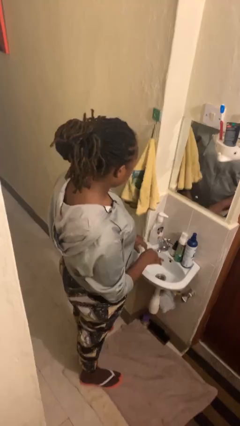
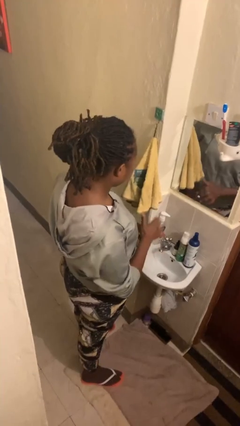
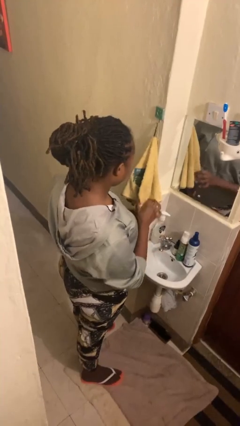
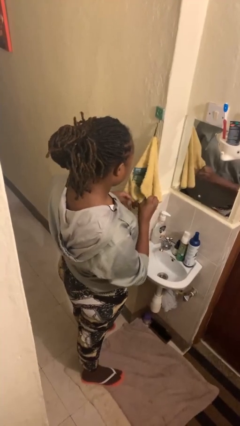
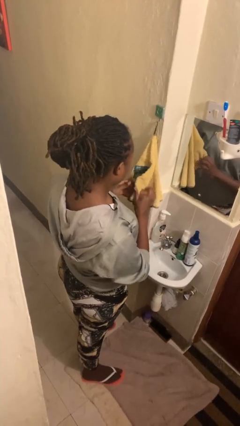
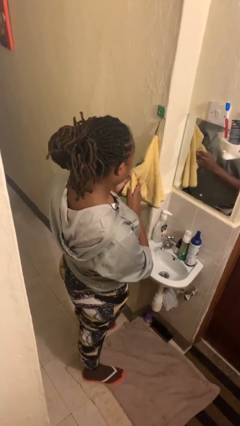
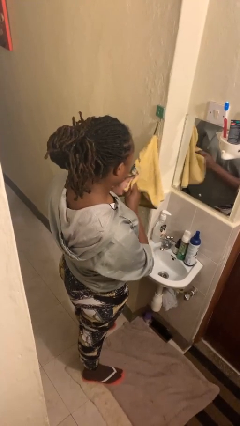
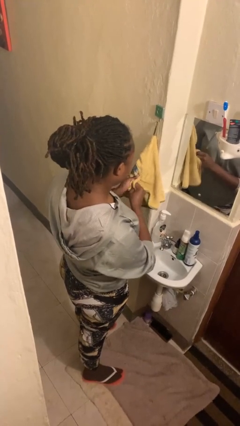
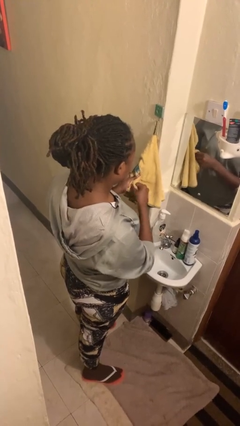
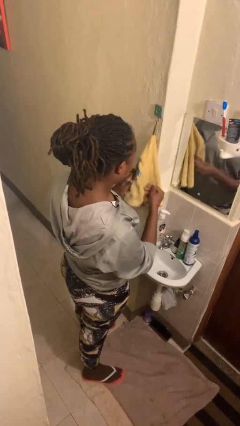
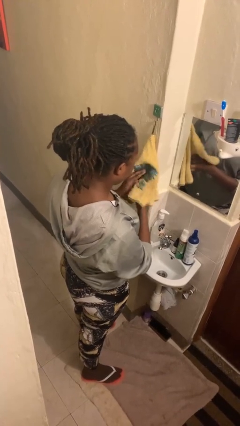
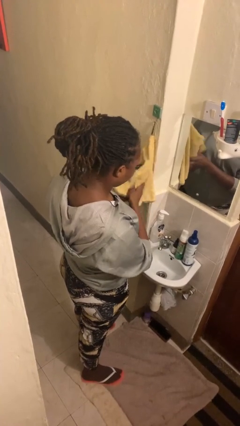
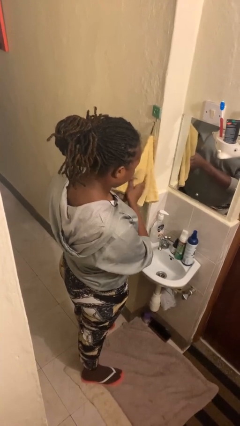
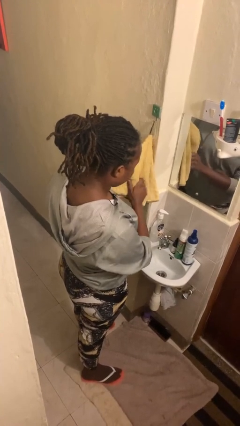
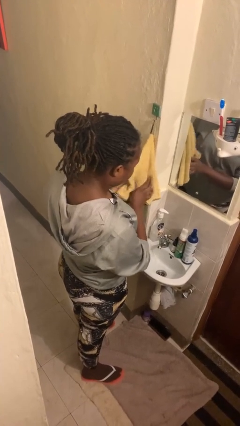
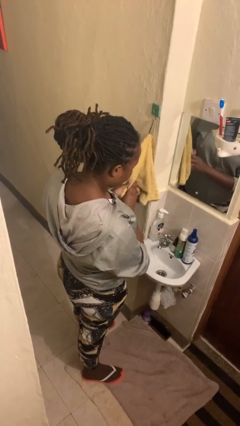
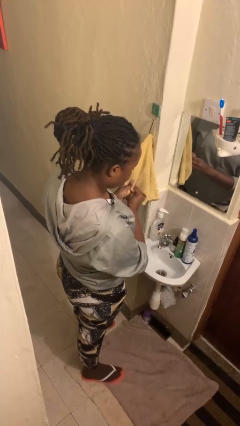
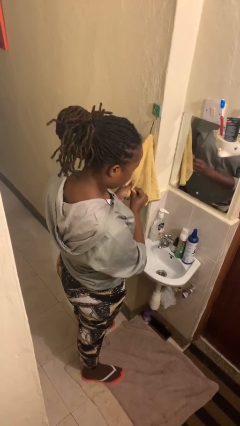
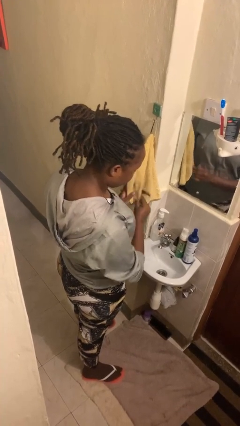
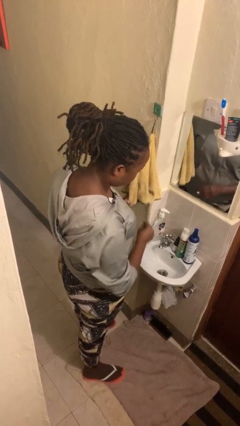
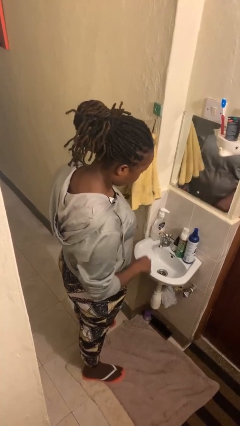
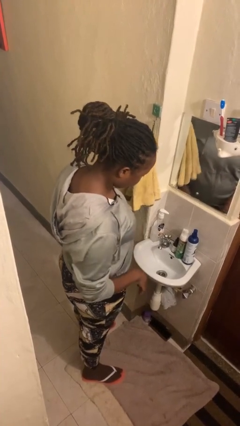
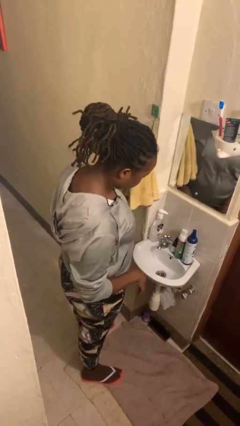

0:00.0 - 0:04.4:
person dries hands with towel

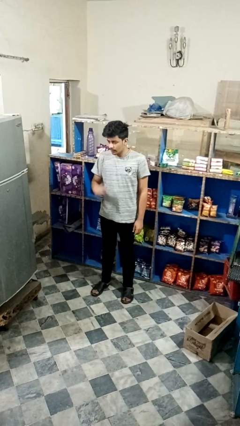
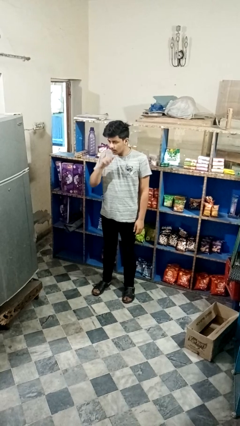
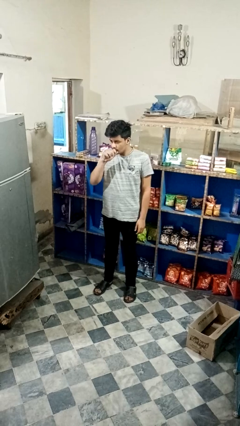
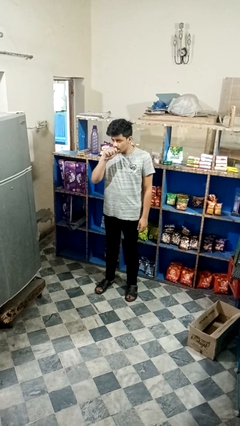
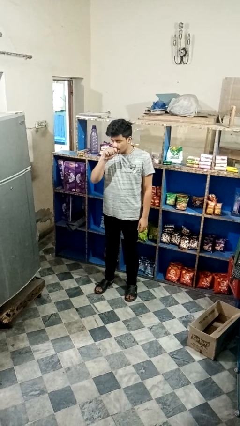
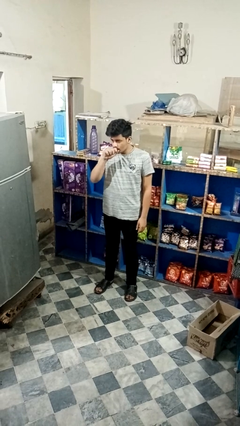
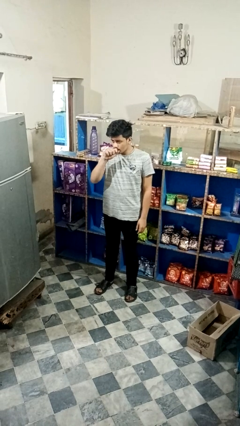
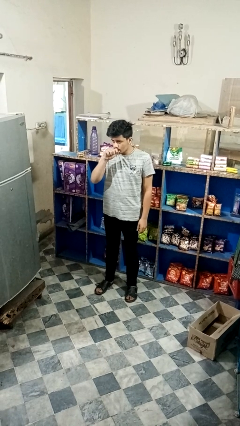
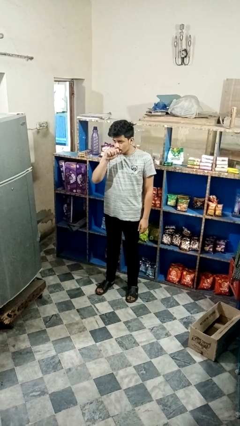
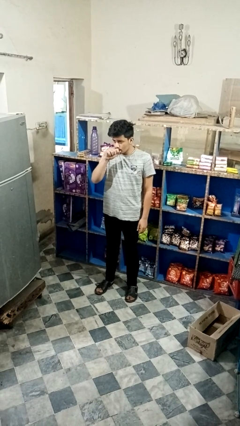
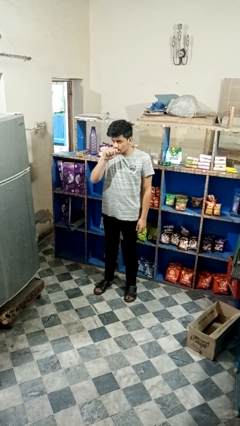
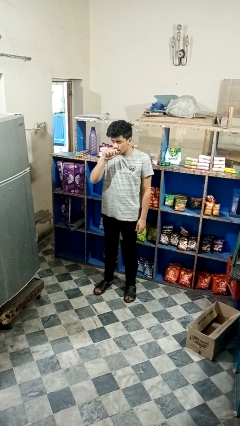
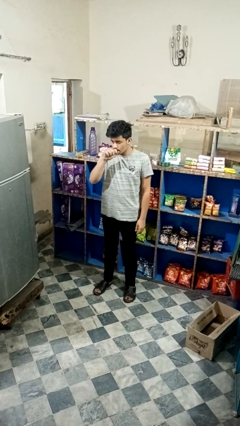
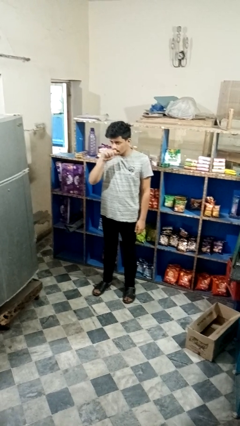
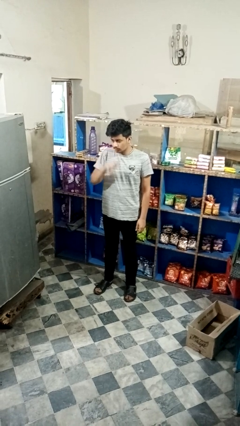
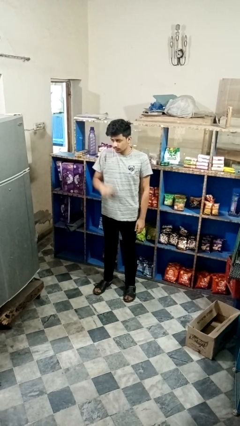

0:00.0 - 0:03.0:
person vapes

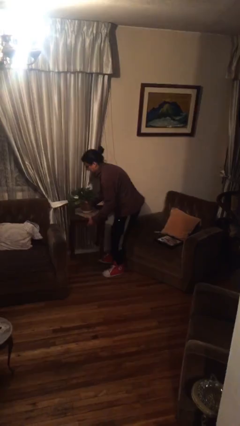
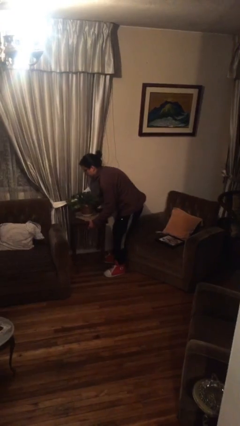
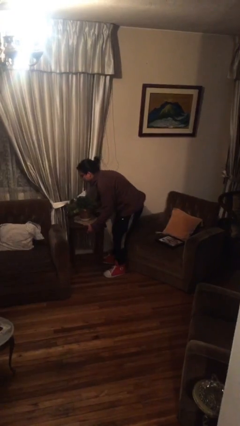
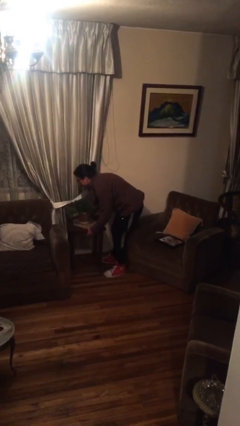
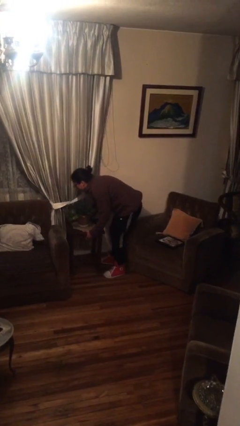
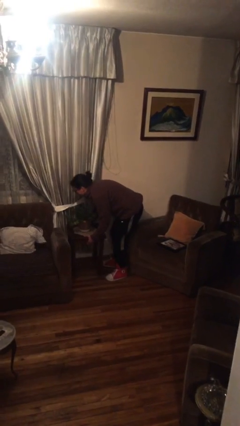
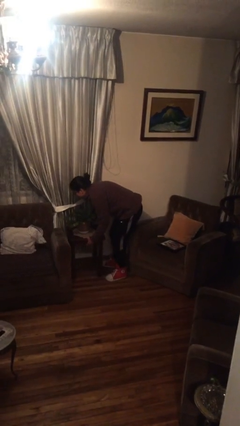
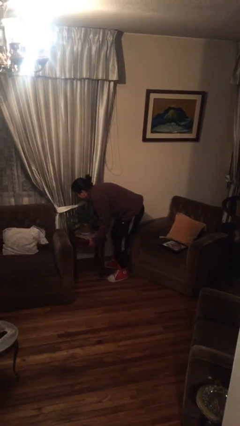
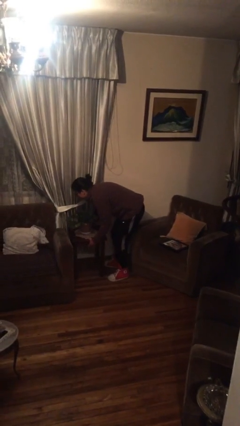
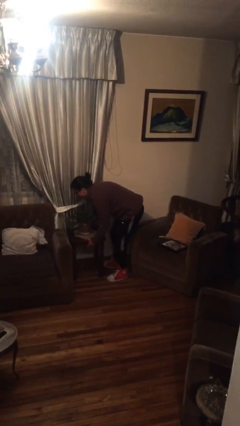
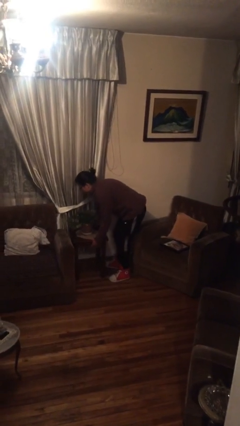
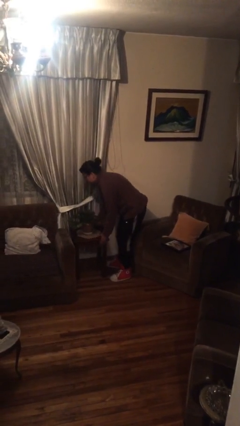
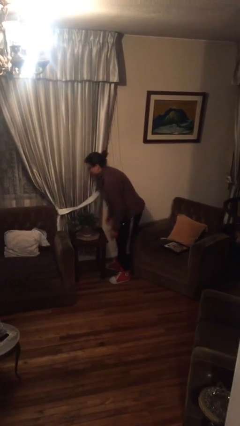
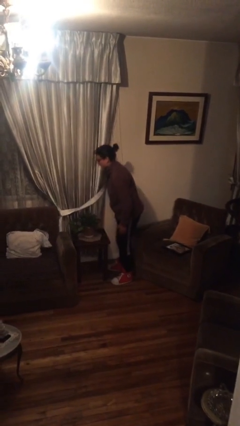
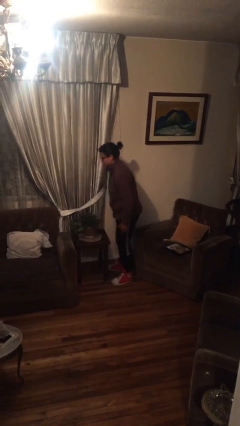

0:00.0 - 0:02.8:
person puts down object on floor

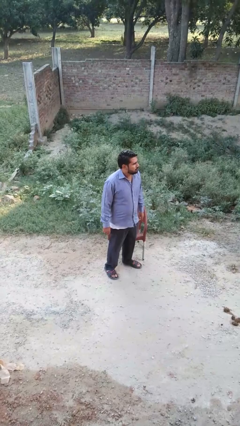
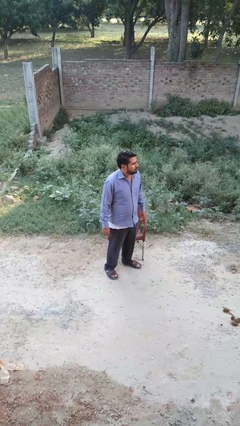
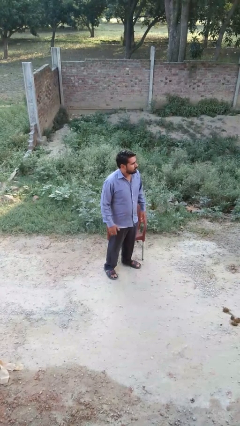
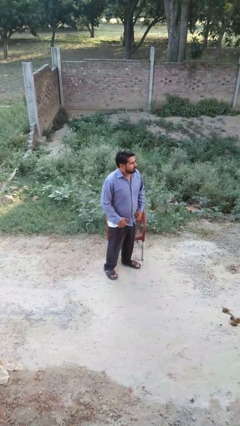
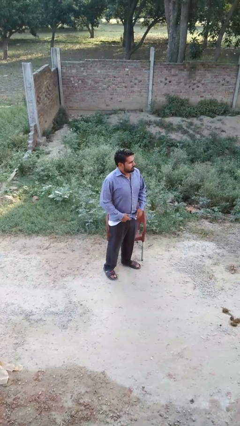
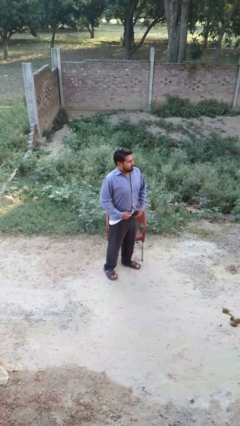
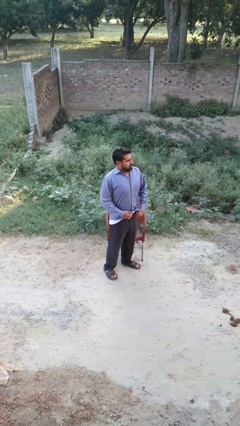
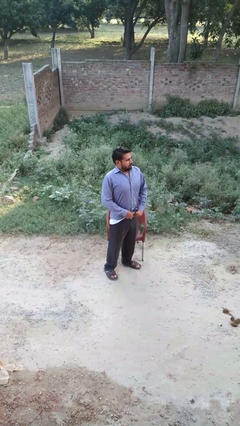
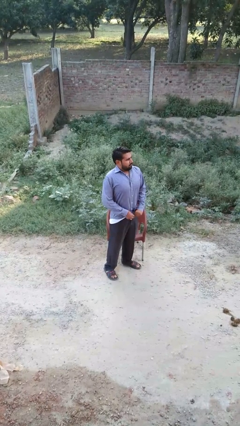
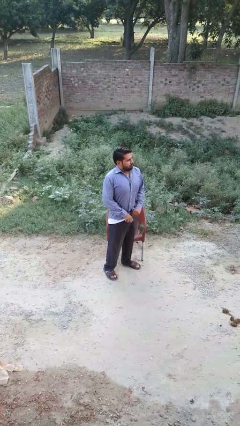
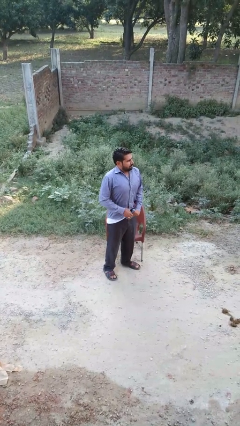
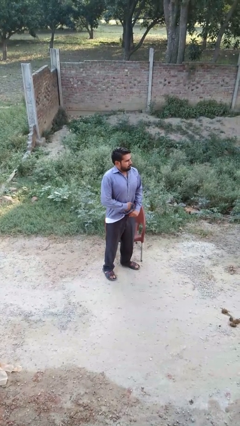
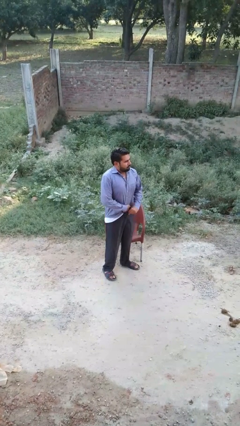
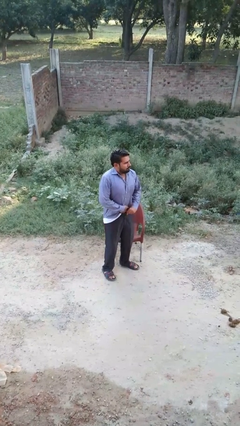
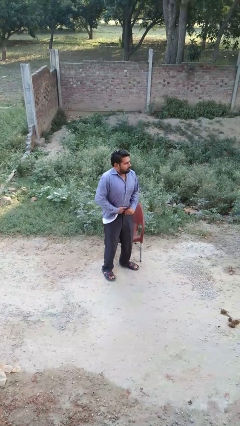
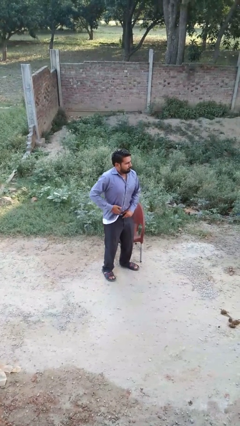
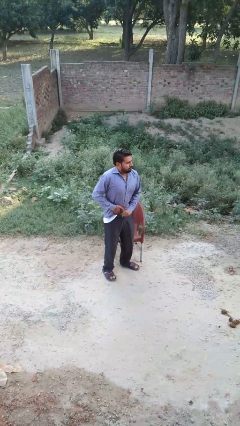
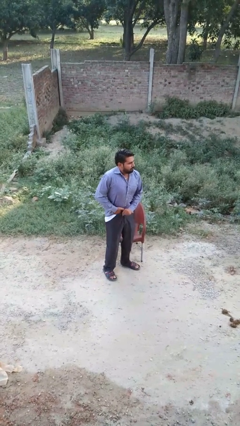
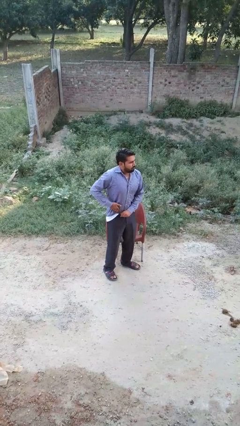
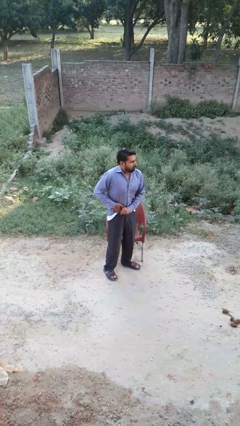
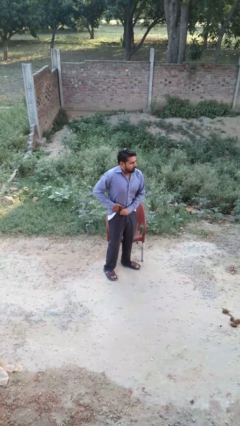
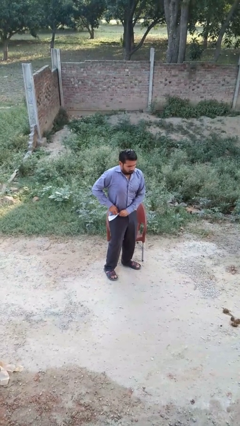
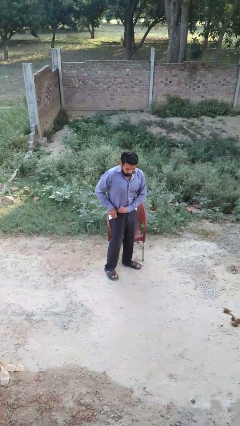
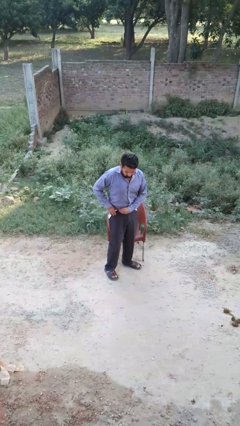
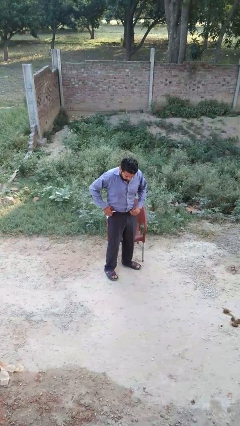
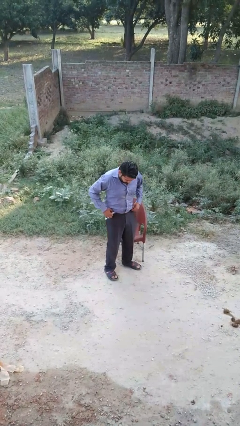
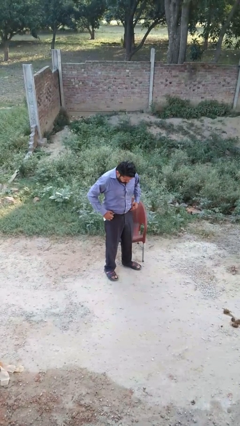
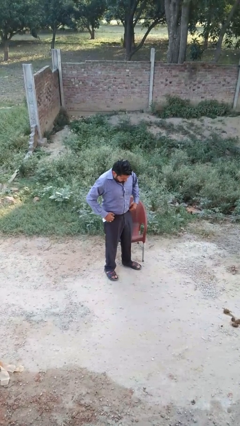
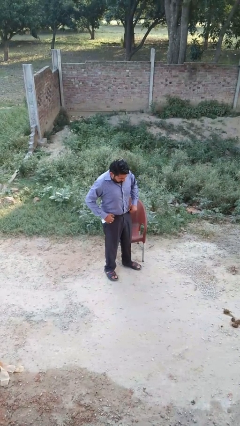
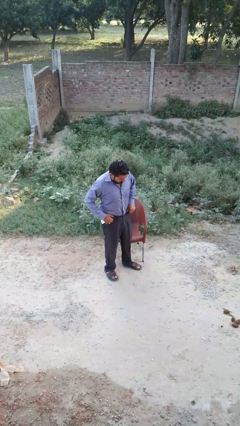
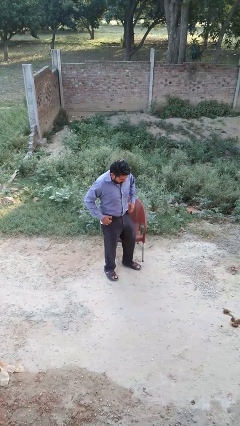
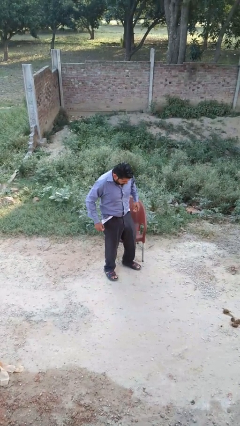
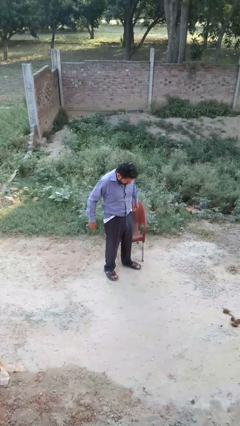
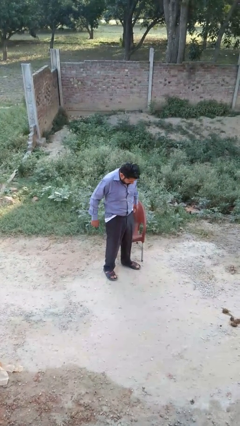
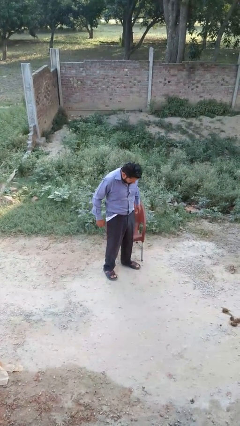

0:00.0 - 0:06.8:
person tucks in shirt

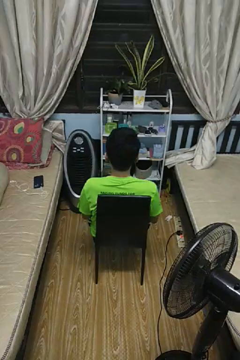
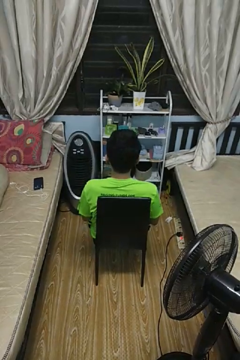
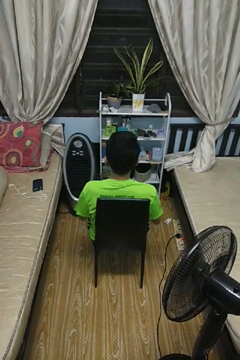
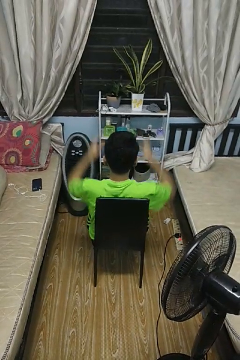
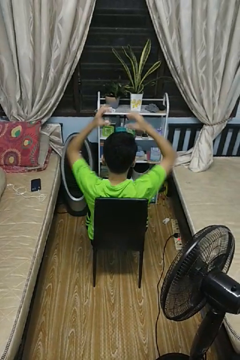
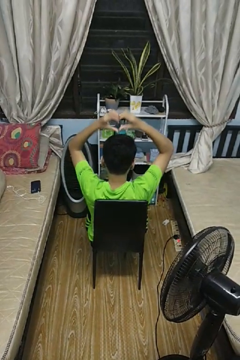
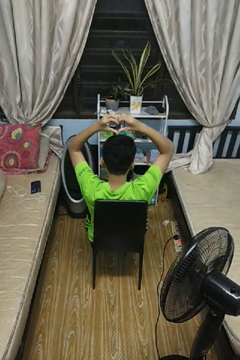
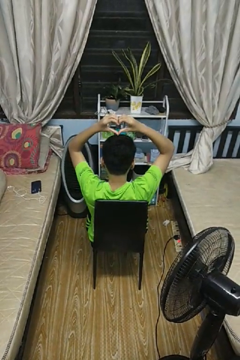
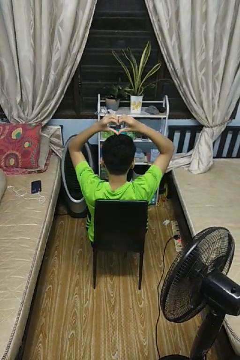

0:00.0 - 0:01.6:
person gestures heart
